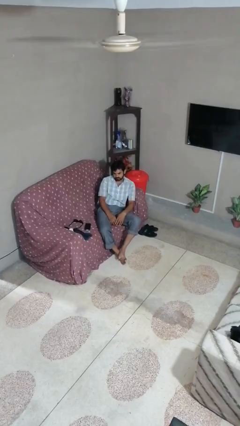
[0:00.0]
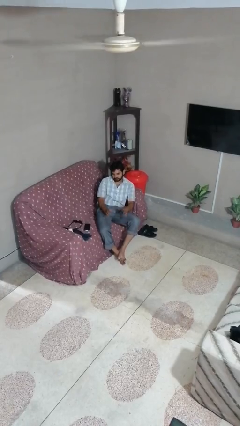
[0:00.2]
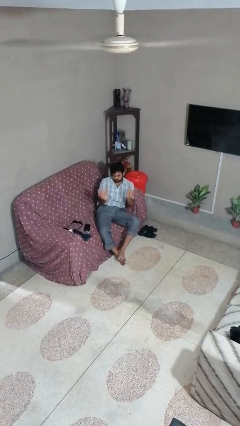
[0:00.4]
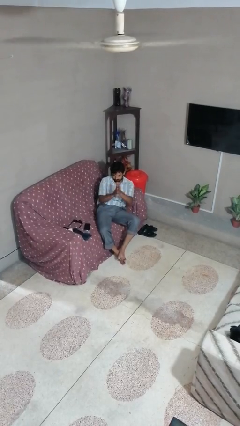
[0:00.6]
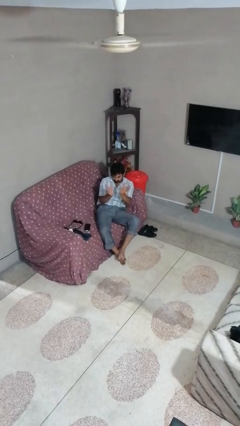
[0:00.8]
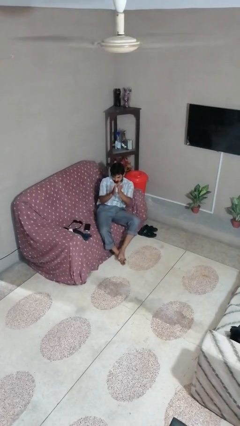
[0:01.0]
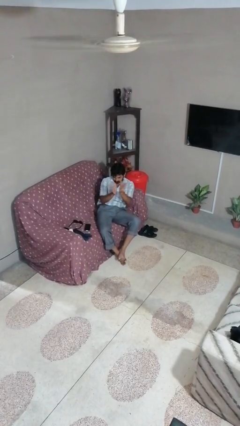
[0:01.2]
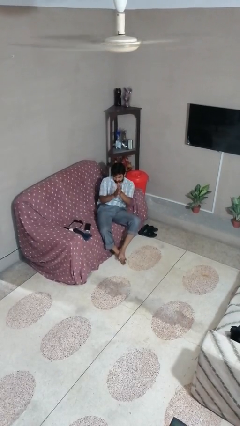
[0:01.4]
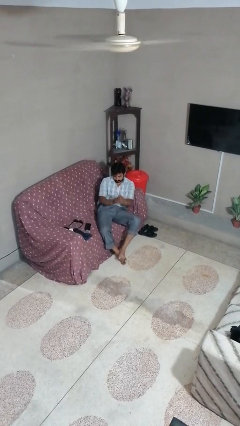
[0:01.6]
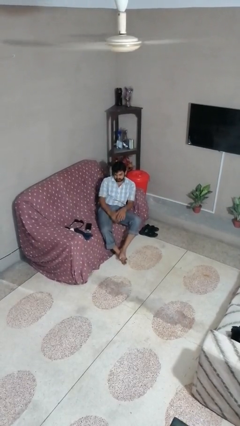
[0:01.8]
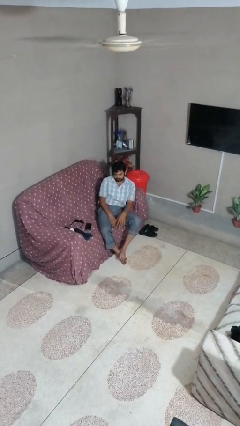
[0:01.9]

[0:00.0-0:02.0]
person claps hands

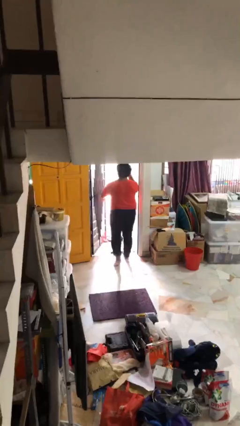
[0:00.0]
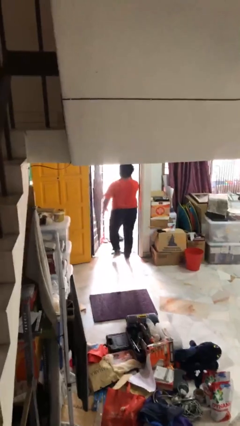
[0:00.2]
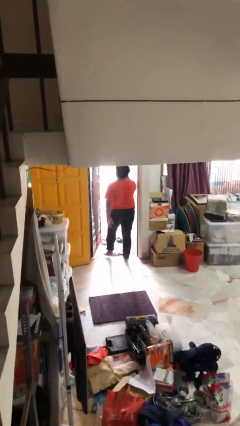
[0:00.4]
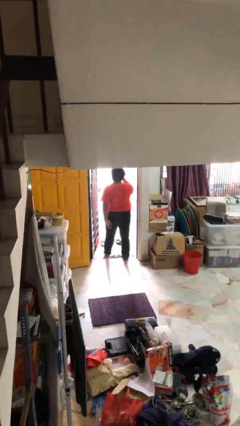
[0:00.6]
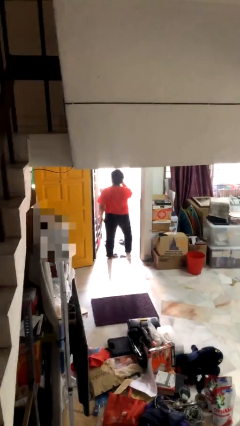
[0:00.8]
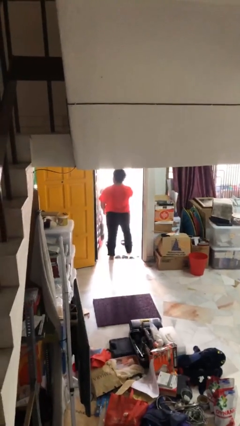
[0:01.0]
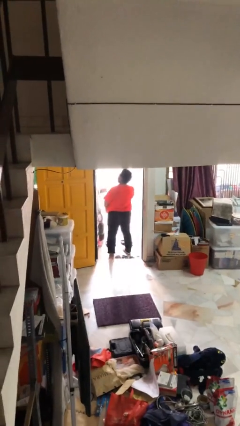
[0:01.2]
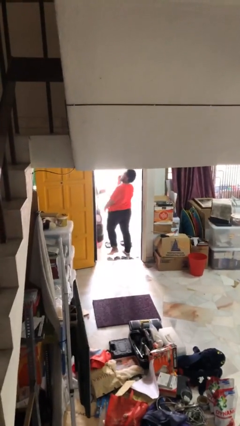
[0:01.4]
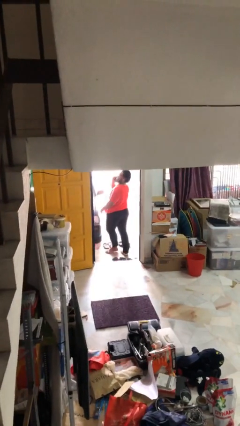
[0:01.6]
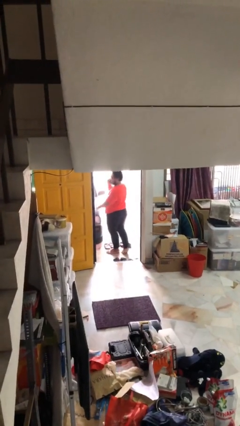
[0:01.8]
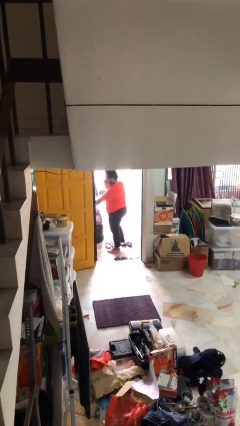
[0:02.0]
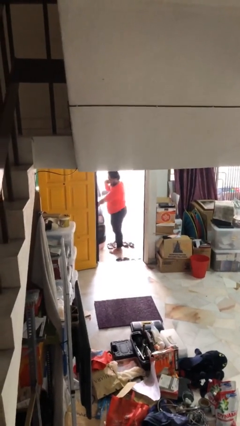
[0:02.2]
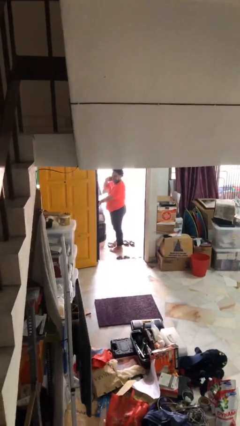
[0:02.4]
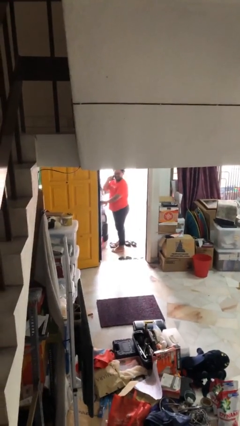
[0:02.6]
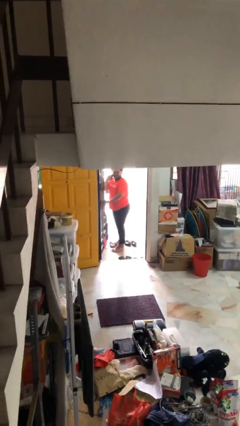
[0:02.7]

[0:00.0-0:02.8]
person exits scene through structure

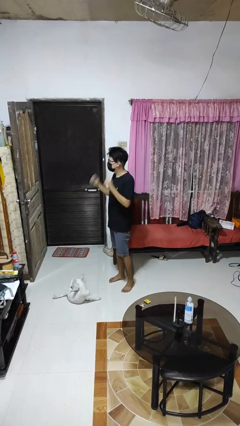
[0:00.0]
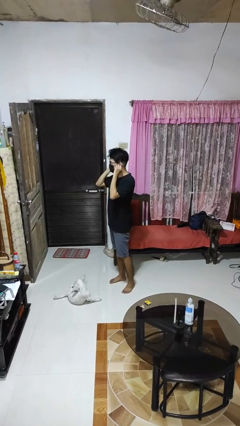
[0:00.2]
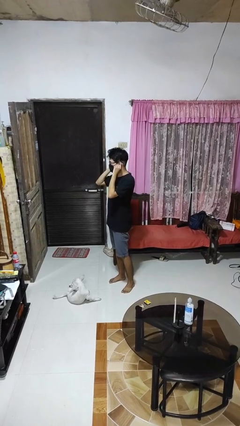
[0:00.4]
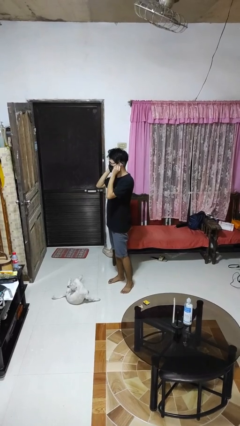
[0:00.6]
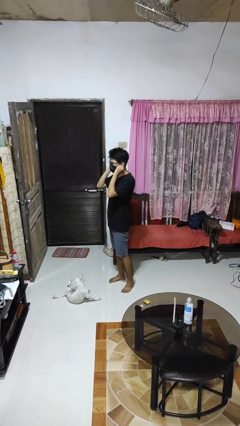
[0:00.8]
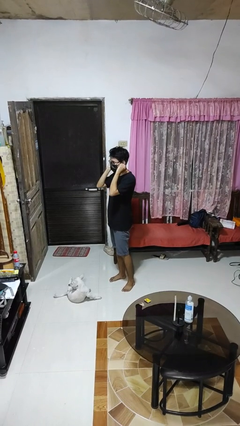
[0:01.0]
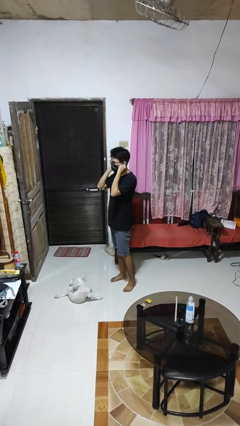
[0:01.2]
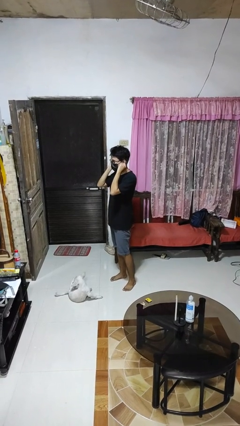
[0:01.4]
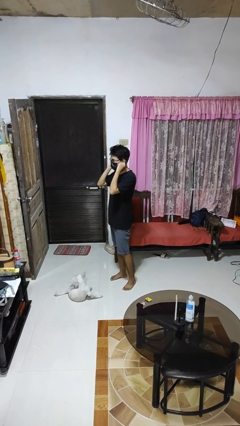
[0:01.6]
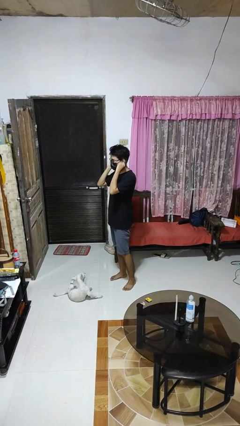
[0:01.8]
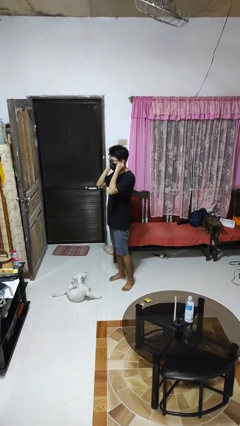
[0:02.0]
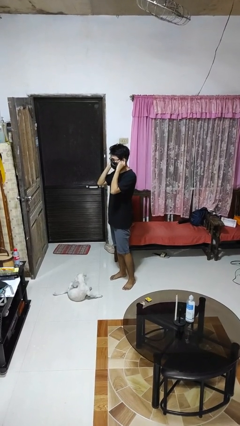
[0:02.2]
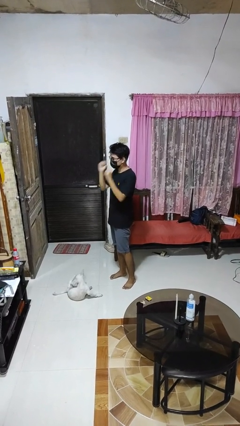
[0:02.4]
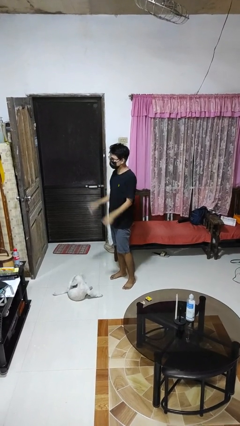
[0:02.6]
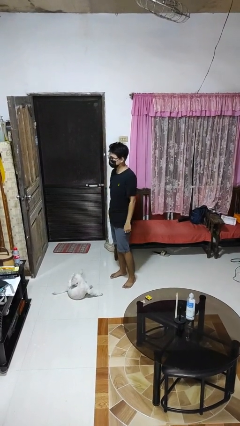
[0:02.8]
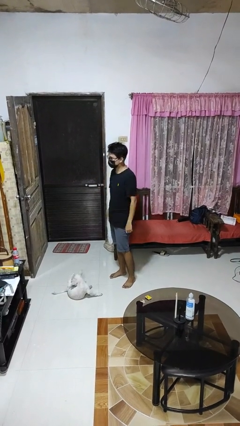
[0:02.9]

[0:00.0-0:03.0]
person touches earlobe

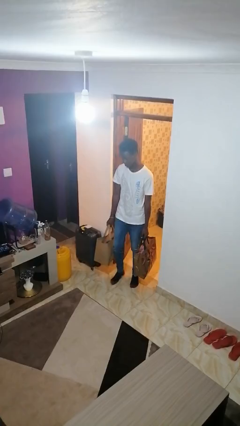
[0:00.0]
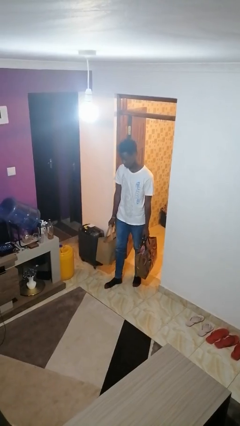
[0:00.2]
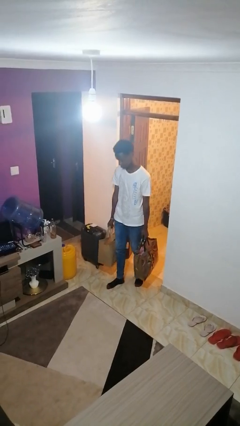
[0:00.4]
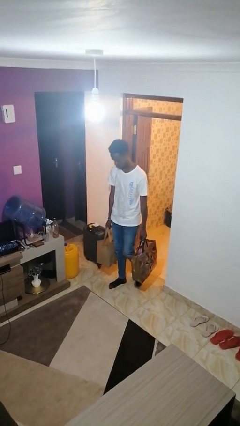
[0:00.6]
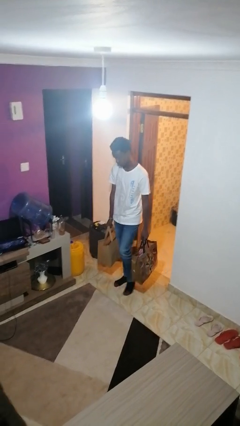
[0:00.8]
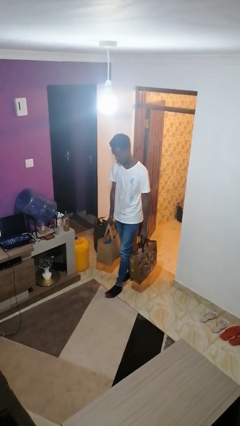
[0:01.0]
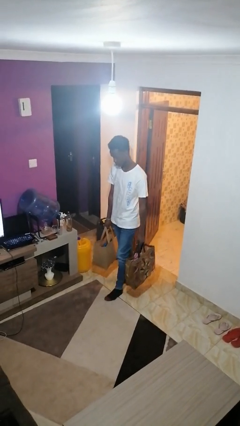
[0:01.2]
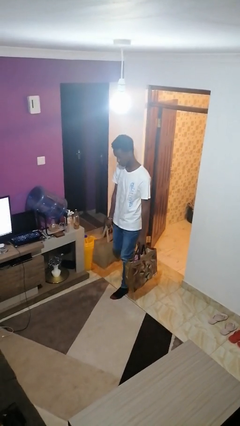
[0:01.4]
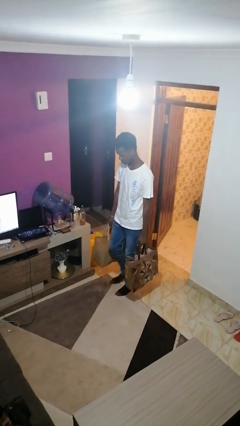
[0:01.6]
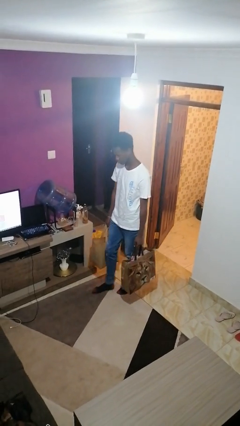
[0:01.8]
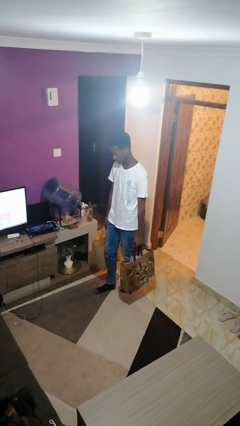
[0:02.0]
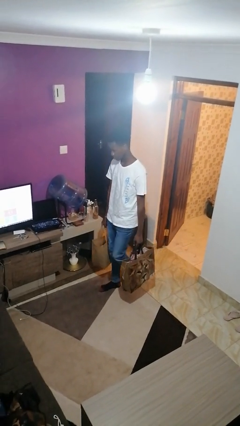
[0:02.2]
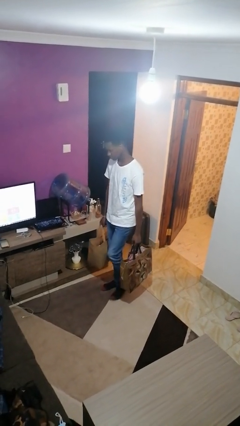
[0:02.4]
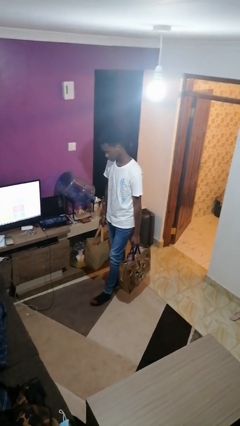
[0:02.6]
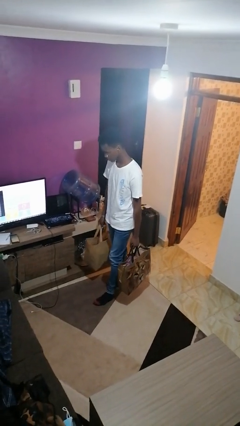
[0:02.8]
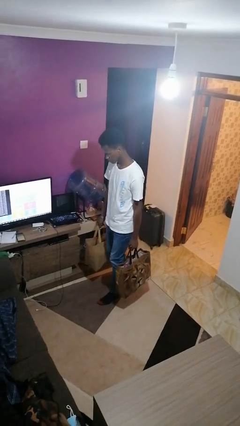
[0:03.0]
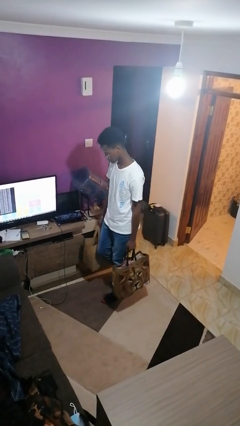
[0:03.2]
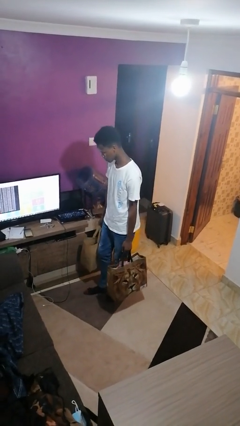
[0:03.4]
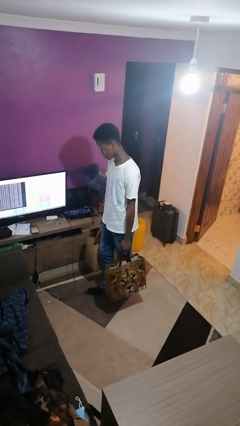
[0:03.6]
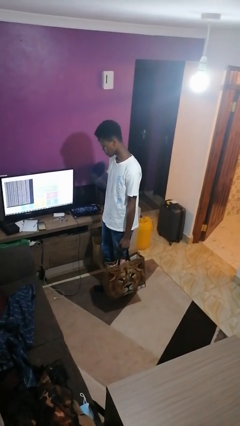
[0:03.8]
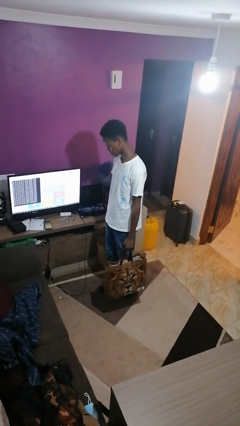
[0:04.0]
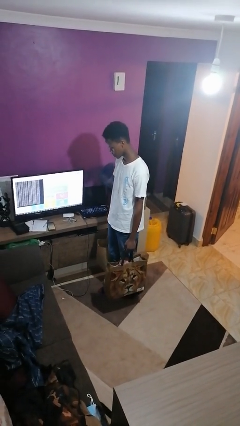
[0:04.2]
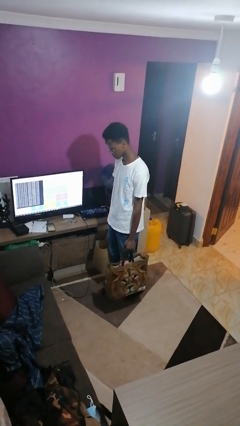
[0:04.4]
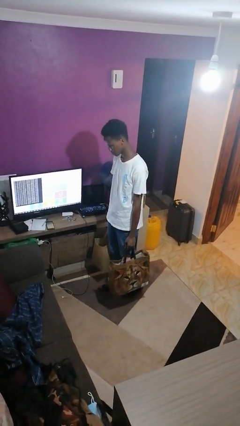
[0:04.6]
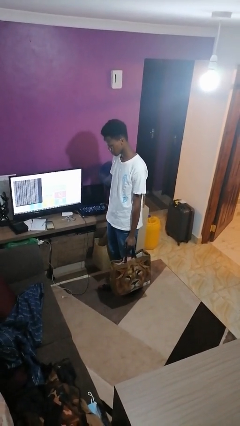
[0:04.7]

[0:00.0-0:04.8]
person carries groceries

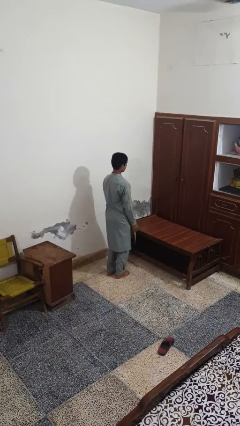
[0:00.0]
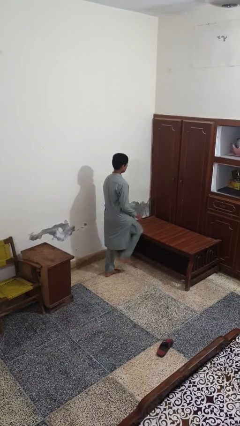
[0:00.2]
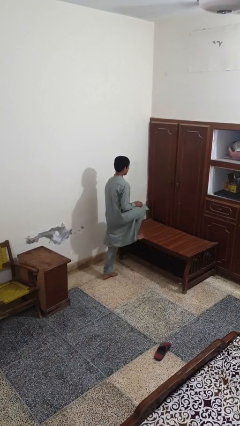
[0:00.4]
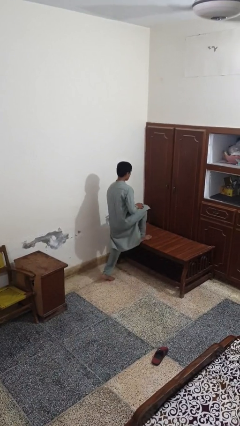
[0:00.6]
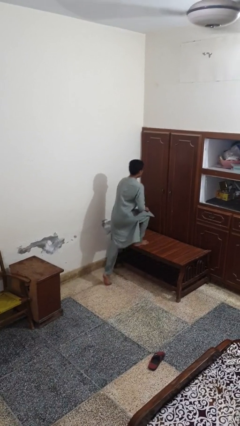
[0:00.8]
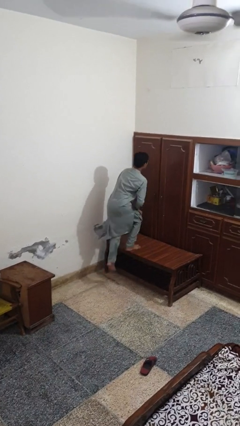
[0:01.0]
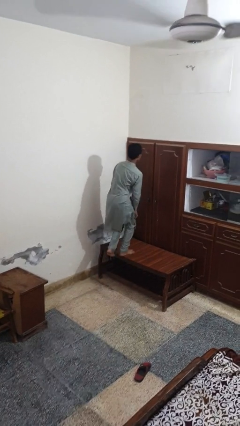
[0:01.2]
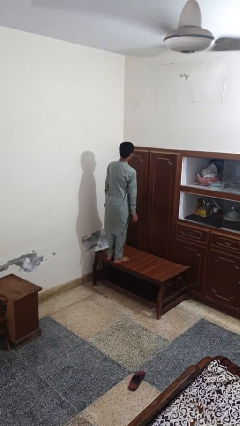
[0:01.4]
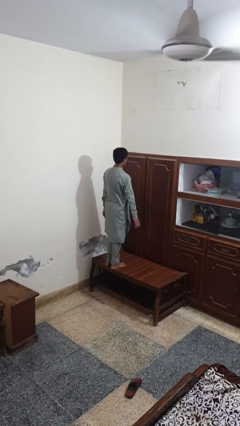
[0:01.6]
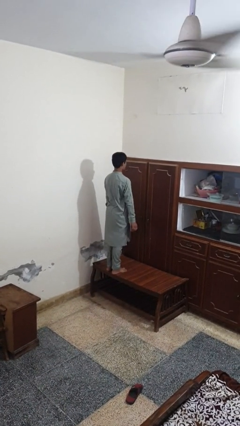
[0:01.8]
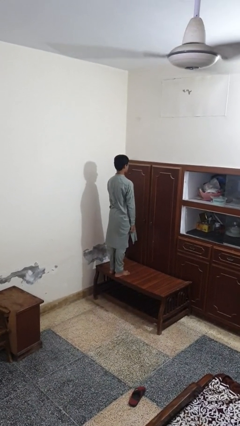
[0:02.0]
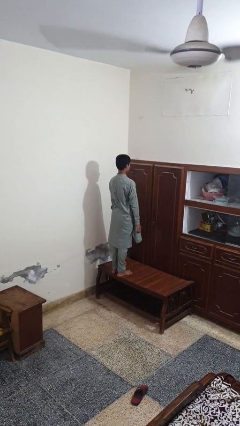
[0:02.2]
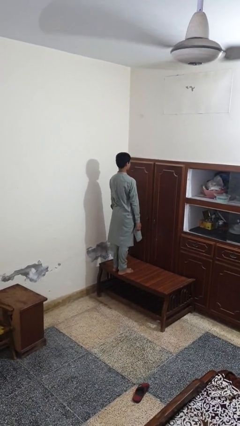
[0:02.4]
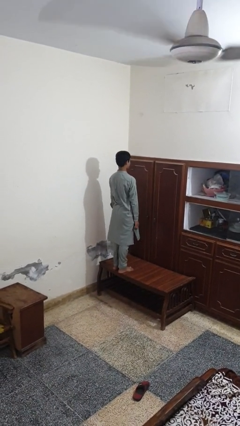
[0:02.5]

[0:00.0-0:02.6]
person climbs on table

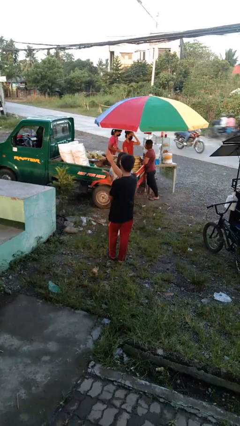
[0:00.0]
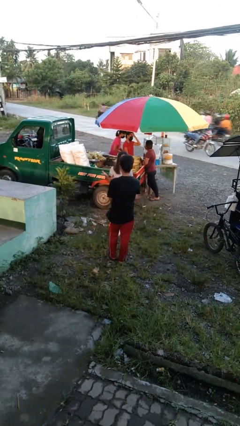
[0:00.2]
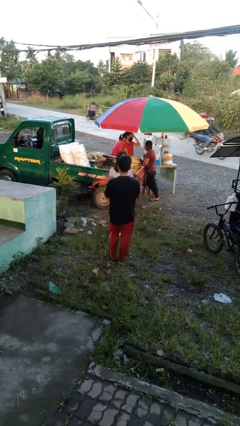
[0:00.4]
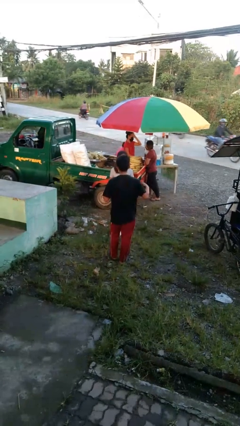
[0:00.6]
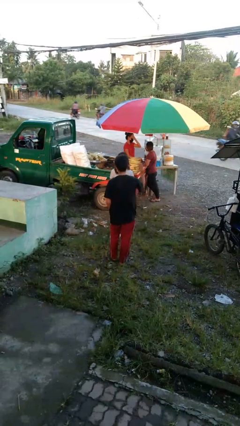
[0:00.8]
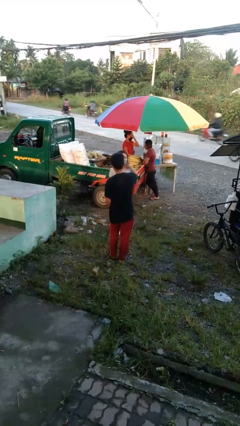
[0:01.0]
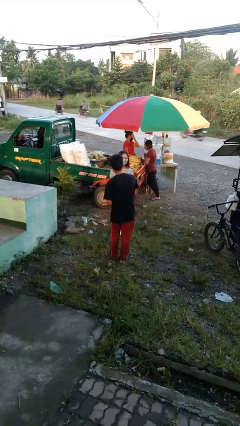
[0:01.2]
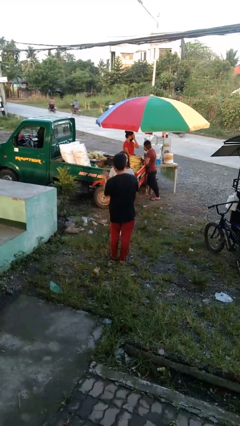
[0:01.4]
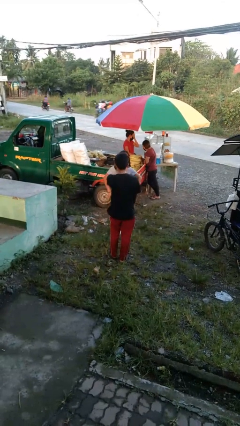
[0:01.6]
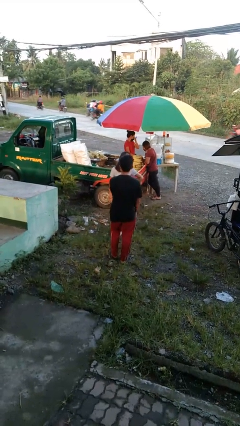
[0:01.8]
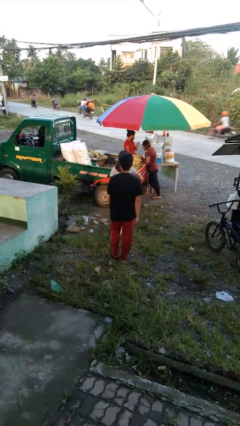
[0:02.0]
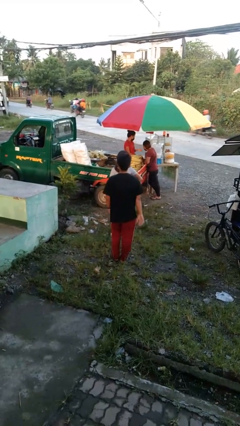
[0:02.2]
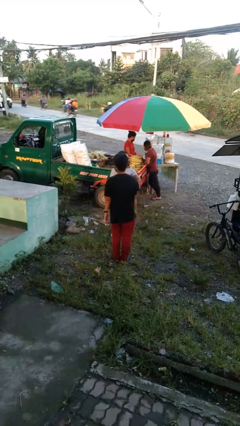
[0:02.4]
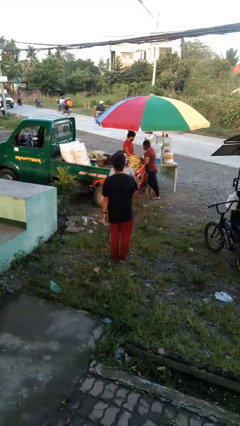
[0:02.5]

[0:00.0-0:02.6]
person talks to person
